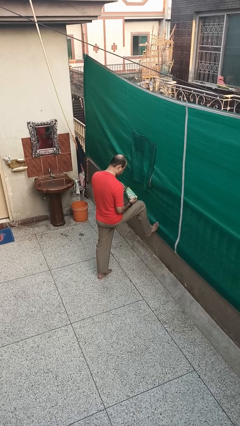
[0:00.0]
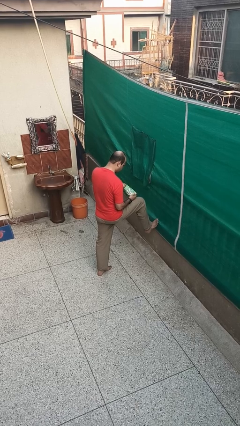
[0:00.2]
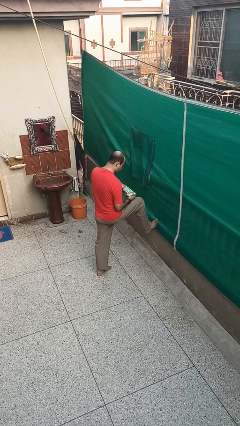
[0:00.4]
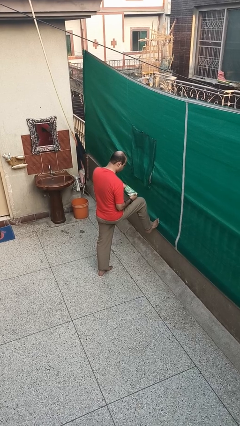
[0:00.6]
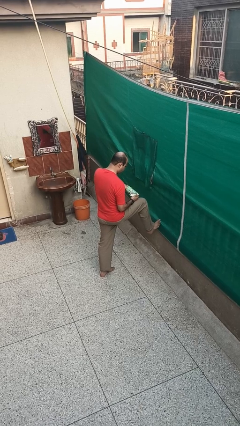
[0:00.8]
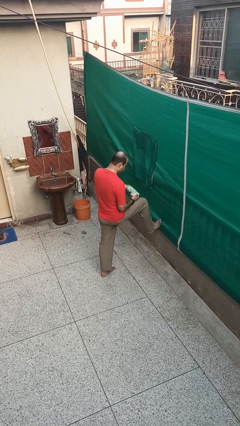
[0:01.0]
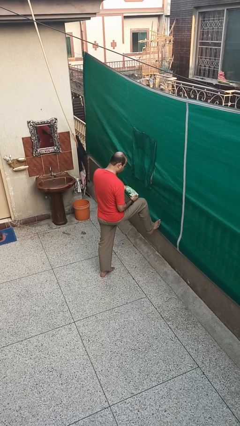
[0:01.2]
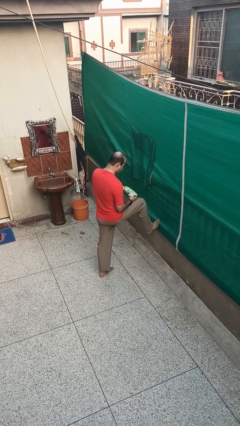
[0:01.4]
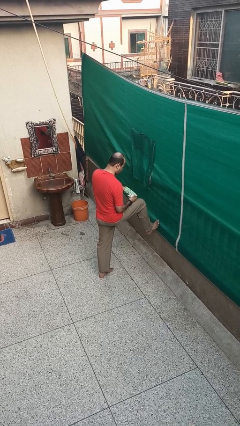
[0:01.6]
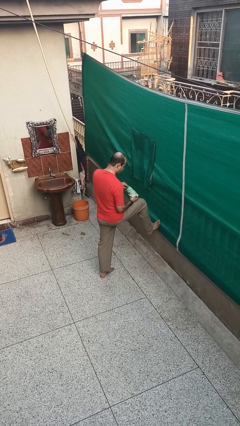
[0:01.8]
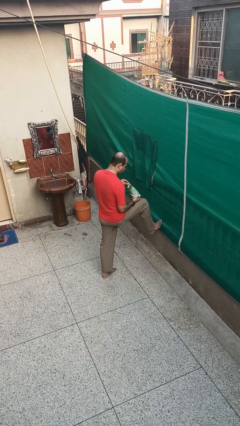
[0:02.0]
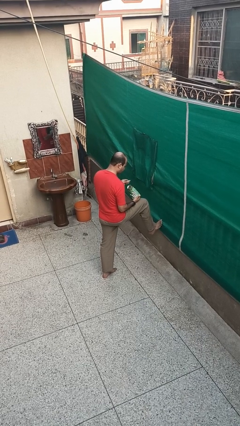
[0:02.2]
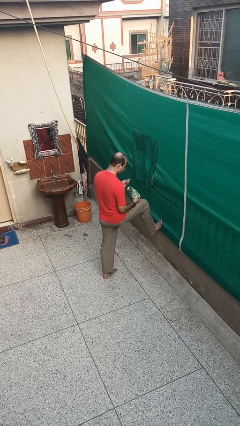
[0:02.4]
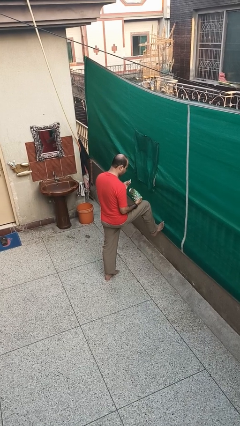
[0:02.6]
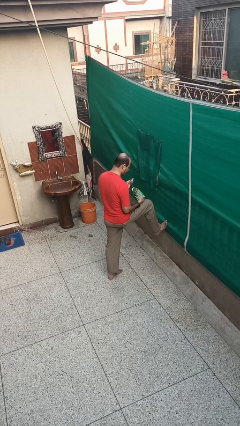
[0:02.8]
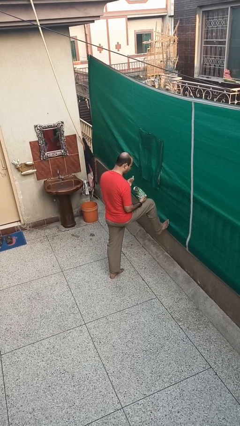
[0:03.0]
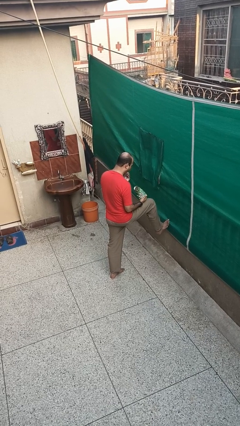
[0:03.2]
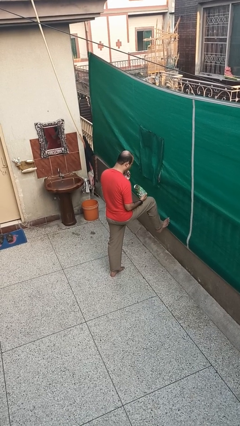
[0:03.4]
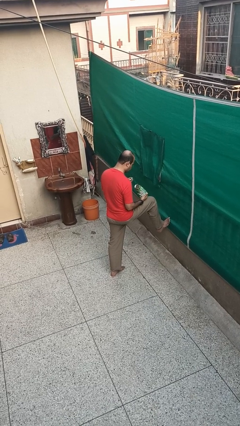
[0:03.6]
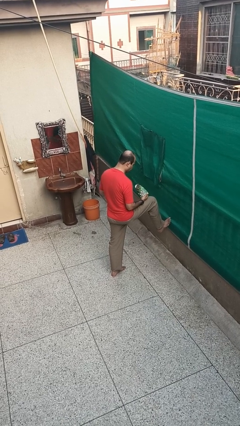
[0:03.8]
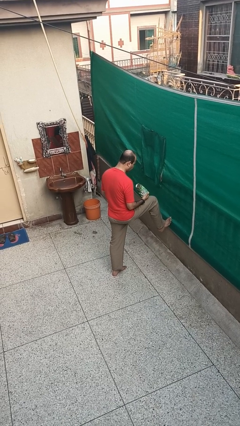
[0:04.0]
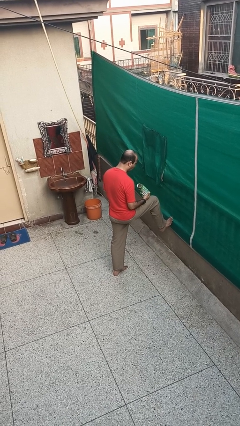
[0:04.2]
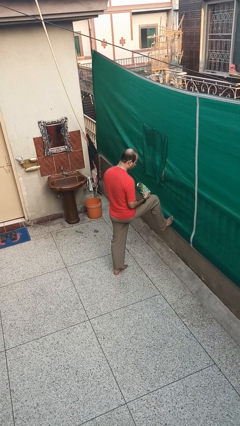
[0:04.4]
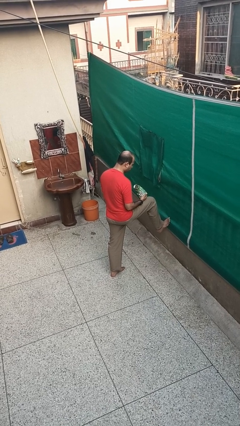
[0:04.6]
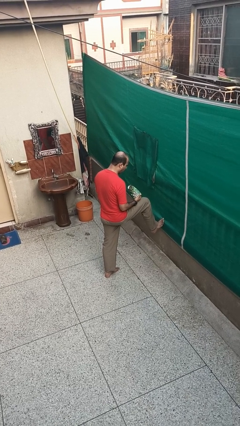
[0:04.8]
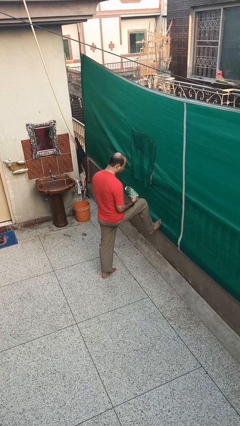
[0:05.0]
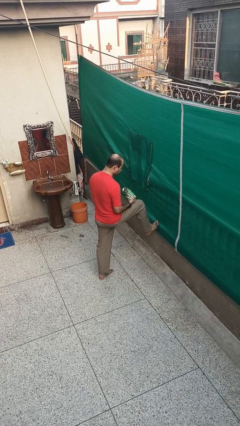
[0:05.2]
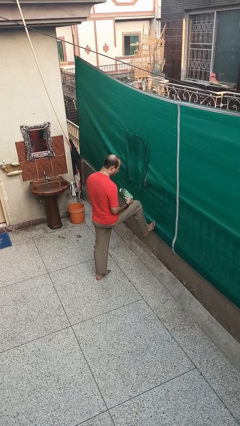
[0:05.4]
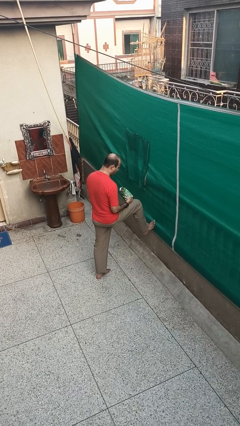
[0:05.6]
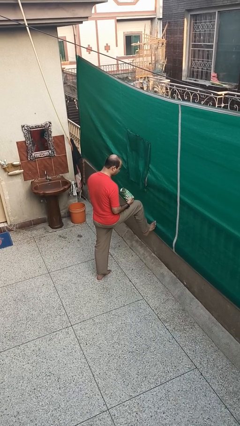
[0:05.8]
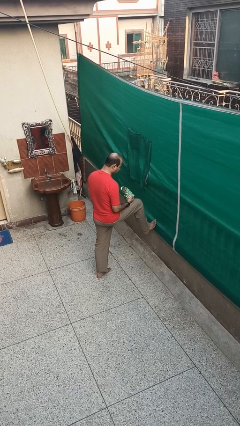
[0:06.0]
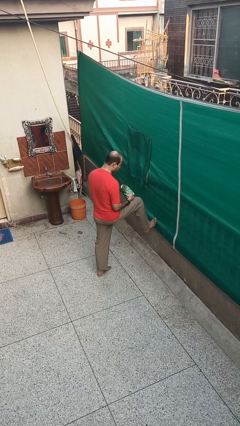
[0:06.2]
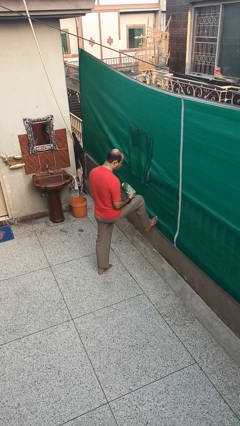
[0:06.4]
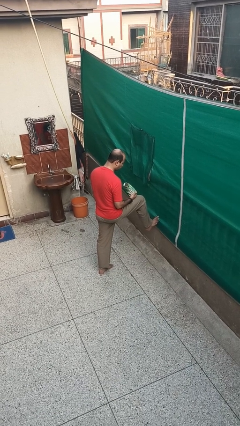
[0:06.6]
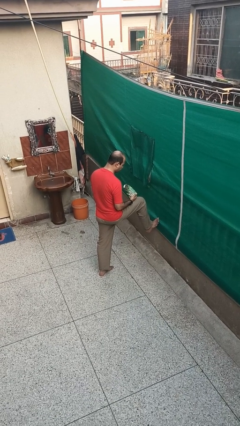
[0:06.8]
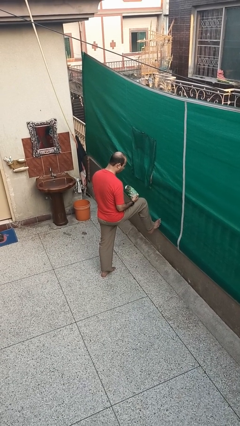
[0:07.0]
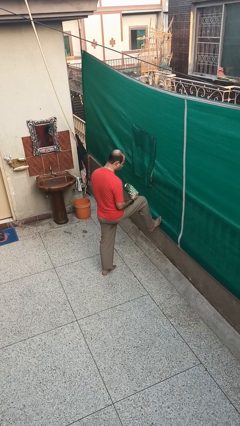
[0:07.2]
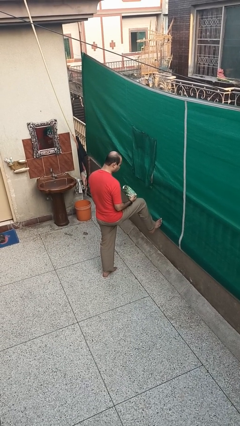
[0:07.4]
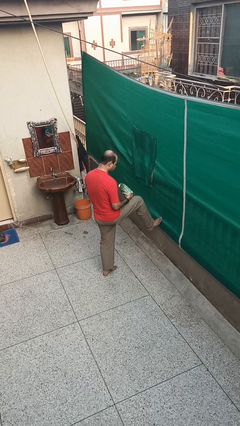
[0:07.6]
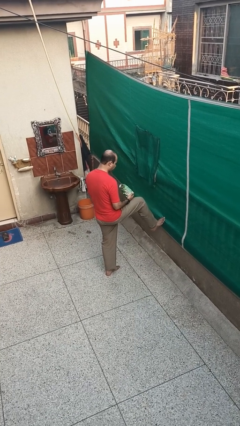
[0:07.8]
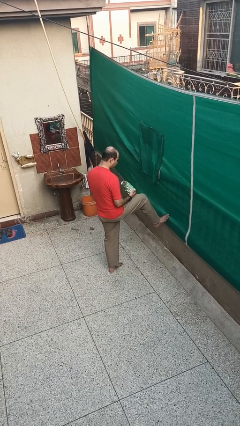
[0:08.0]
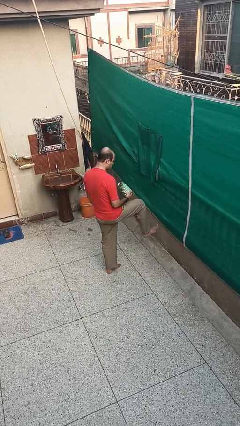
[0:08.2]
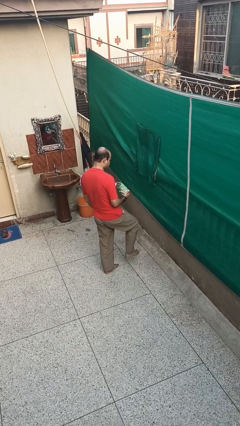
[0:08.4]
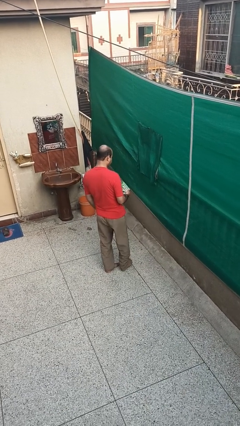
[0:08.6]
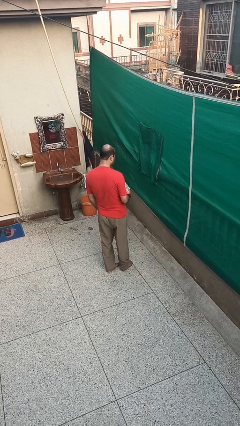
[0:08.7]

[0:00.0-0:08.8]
person eats snack from bag

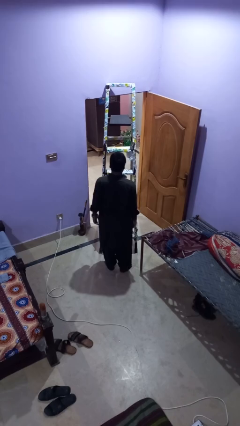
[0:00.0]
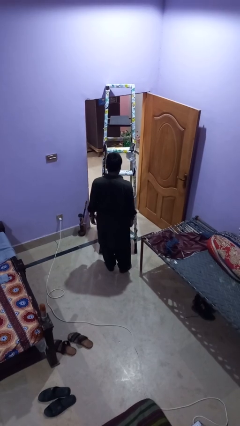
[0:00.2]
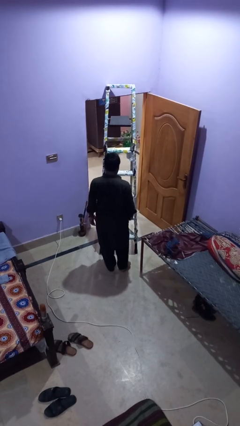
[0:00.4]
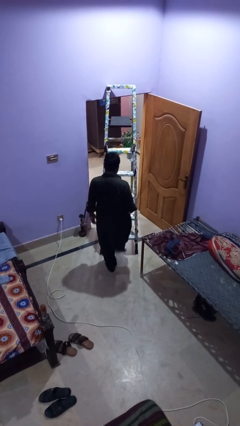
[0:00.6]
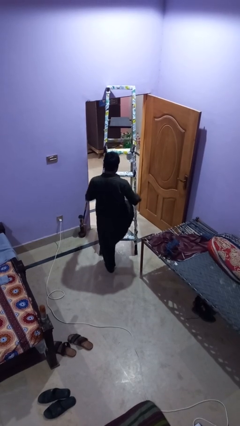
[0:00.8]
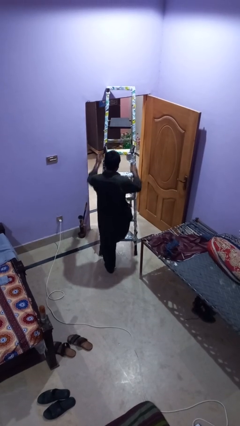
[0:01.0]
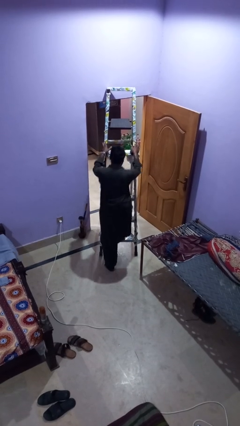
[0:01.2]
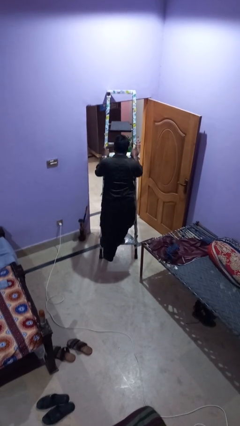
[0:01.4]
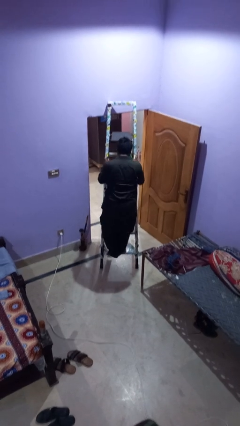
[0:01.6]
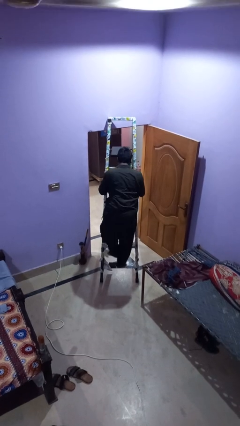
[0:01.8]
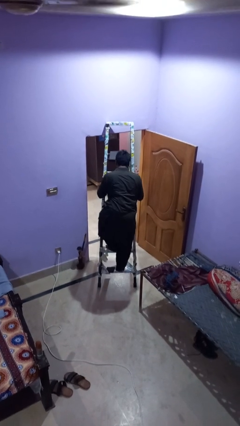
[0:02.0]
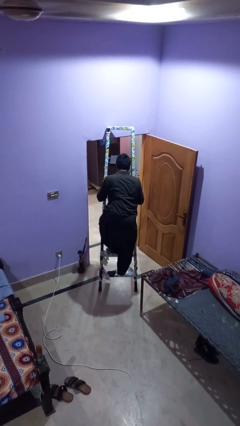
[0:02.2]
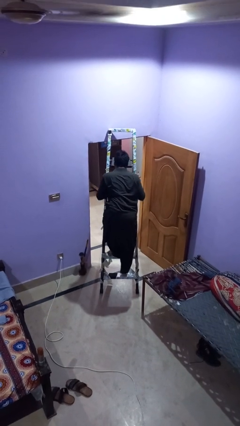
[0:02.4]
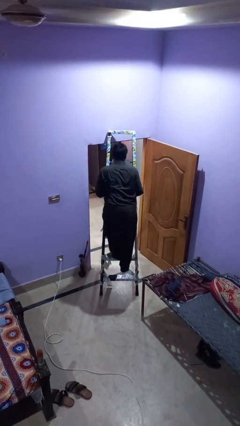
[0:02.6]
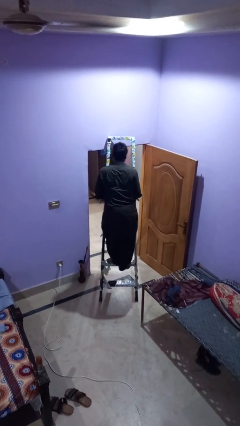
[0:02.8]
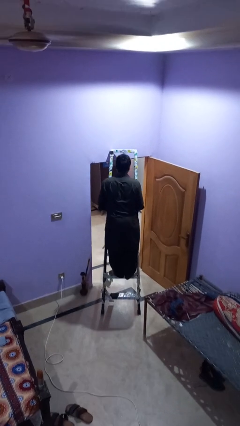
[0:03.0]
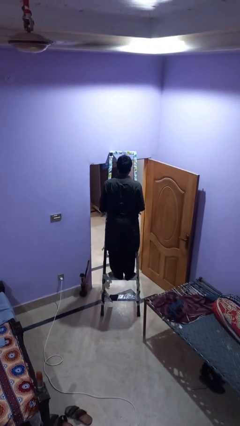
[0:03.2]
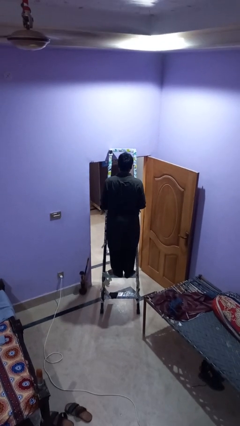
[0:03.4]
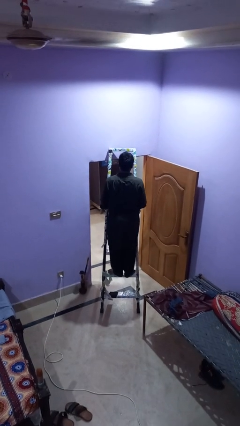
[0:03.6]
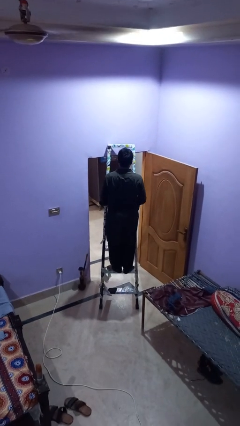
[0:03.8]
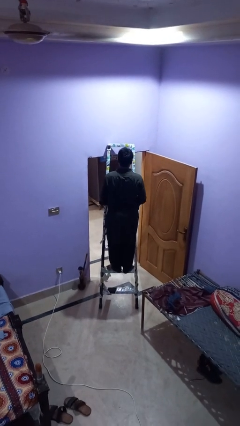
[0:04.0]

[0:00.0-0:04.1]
person climbs up ladder

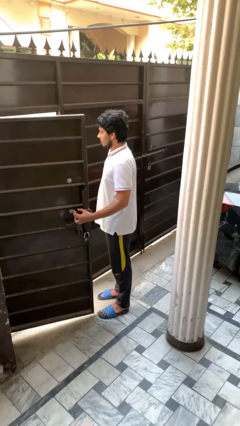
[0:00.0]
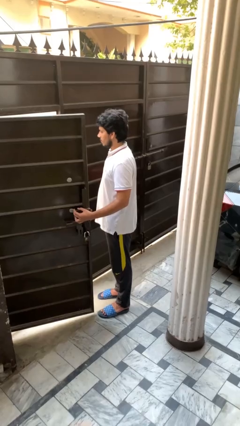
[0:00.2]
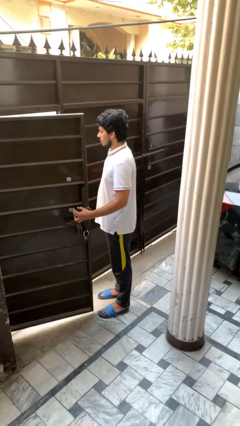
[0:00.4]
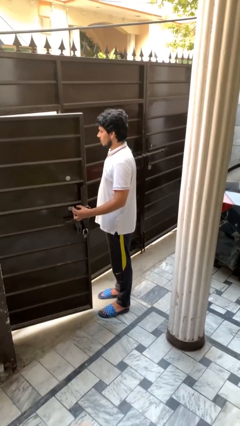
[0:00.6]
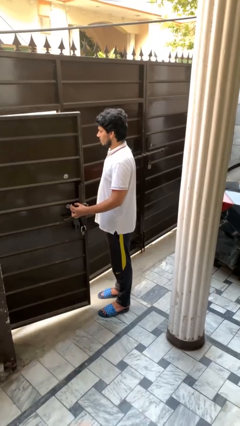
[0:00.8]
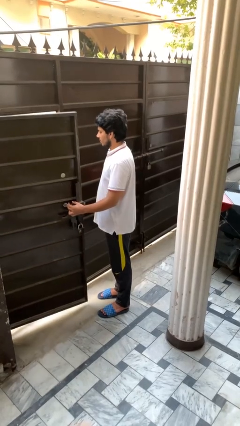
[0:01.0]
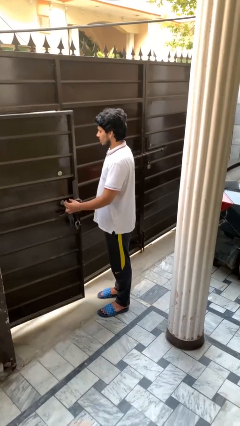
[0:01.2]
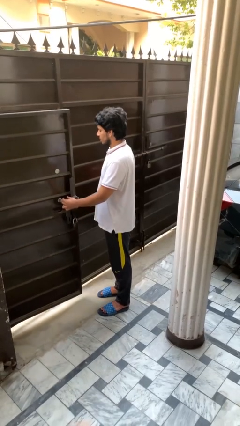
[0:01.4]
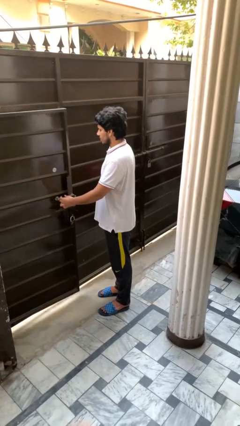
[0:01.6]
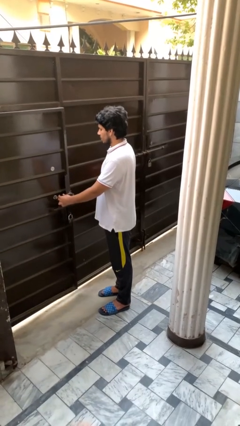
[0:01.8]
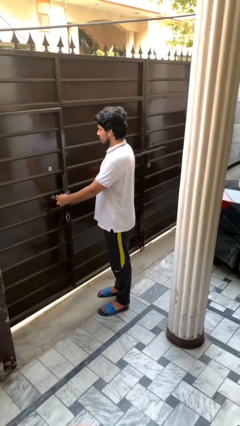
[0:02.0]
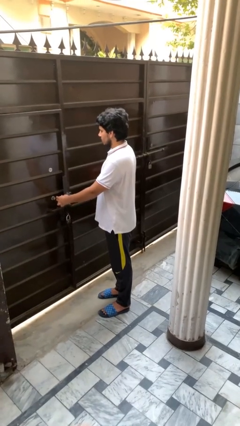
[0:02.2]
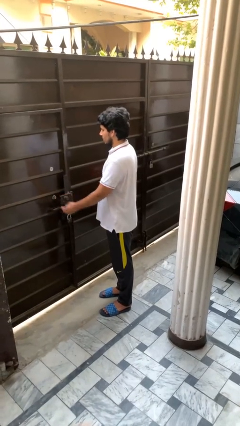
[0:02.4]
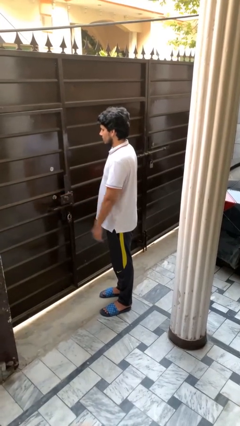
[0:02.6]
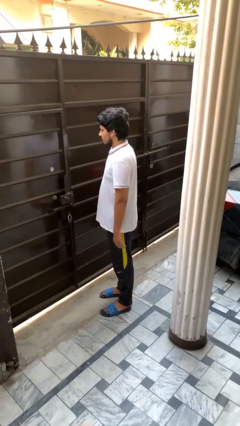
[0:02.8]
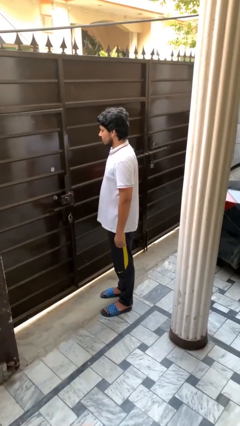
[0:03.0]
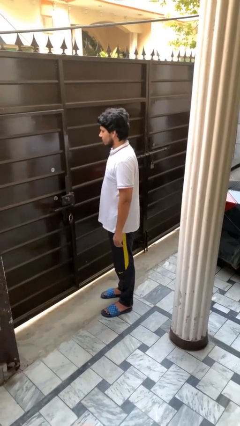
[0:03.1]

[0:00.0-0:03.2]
person closes gate

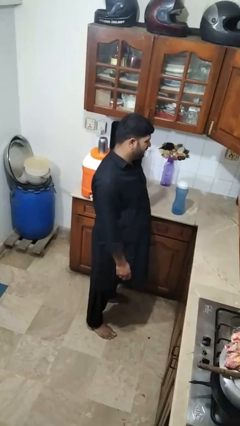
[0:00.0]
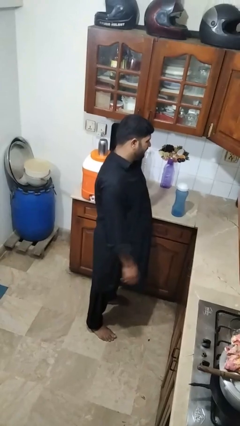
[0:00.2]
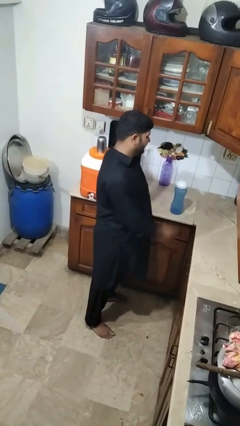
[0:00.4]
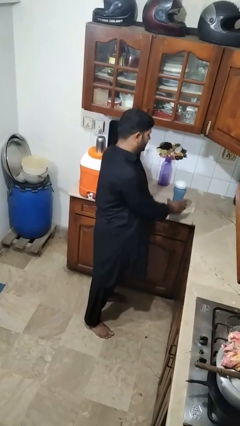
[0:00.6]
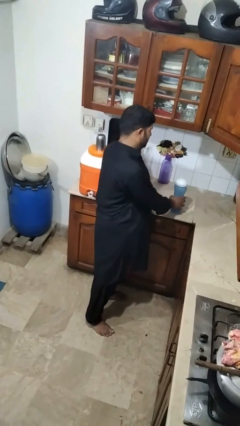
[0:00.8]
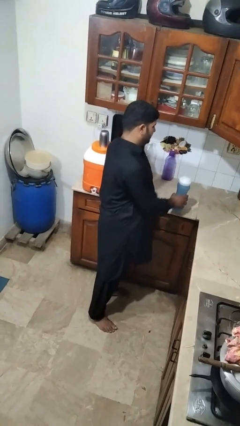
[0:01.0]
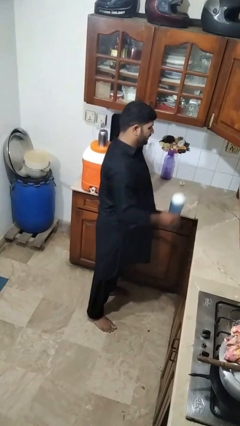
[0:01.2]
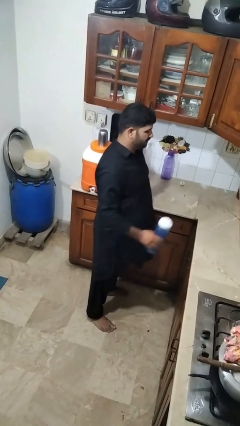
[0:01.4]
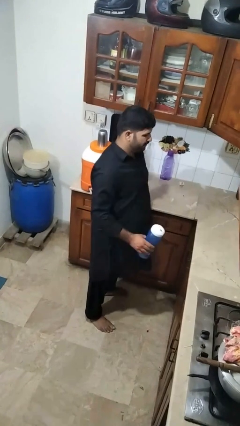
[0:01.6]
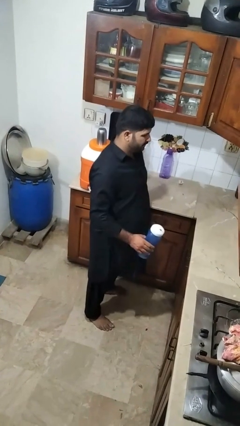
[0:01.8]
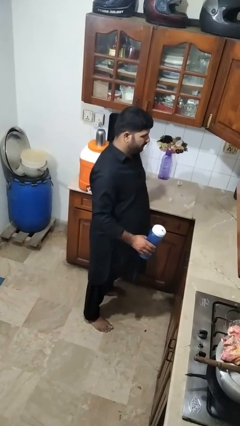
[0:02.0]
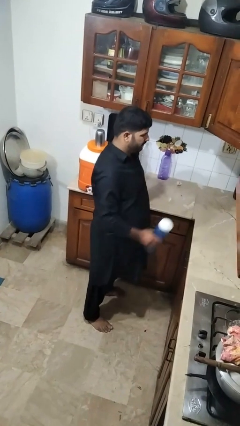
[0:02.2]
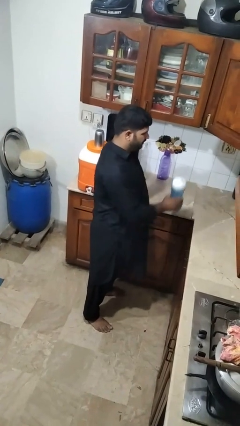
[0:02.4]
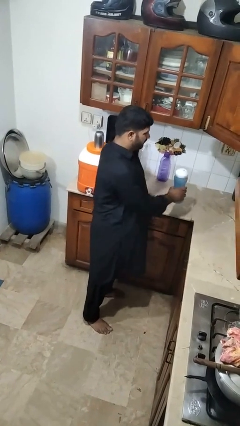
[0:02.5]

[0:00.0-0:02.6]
person picks up object from countertop
